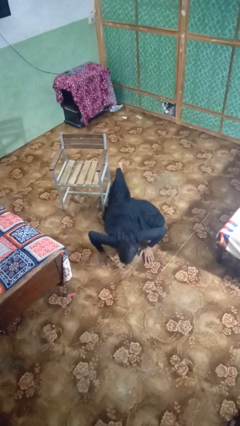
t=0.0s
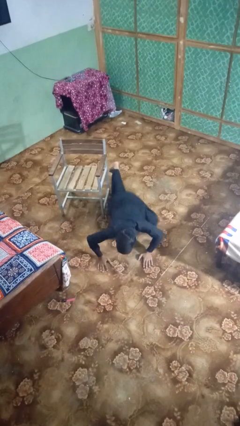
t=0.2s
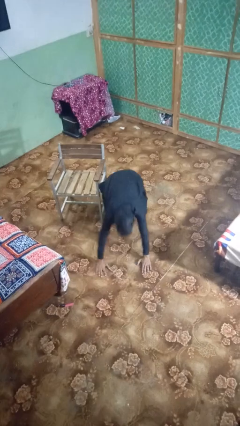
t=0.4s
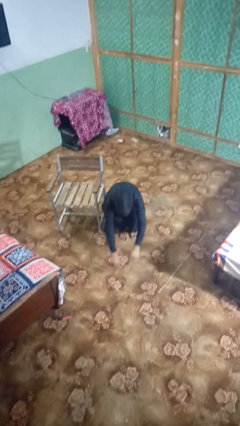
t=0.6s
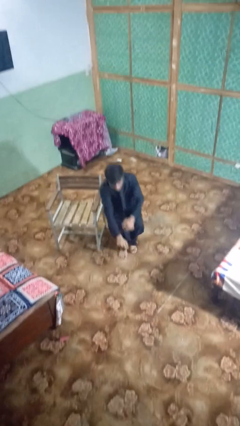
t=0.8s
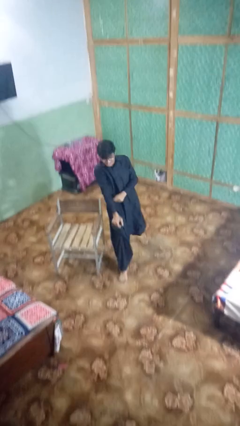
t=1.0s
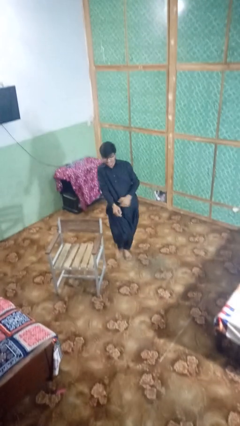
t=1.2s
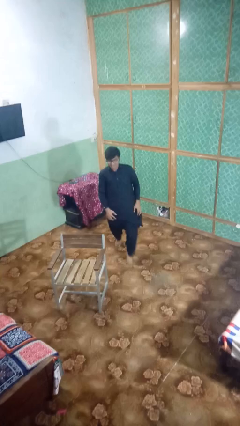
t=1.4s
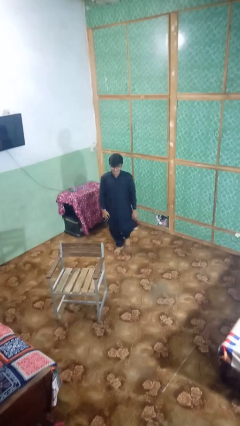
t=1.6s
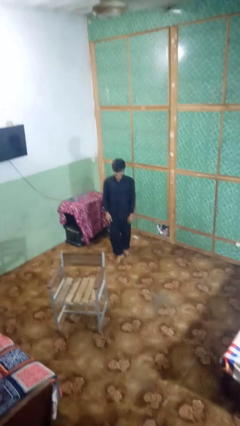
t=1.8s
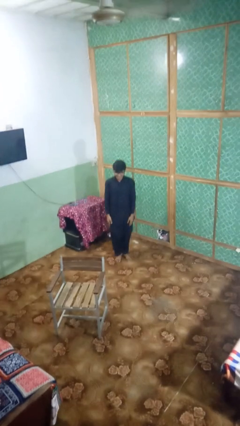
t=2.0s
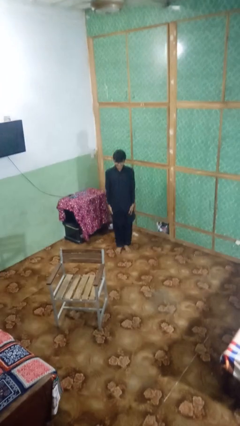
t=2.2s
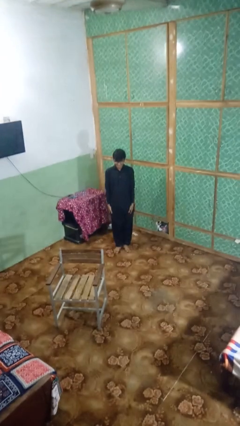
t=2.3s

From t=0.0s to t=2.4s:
person stands up from floor

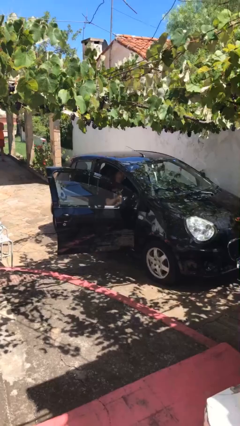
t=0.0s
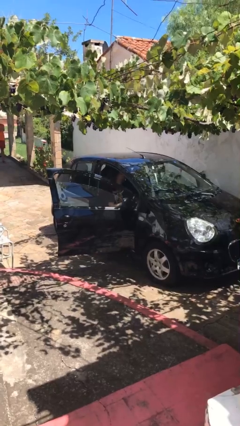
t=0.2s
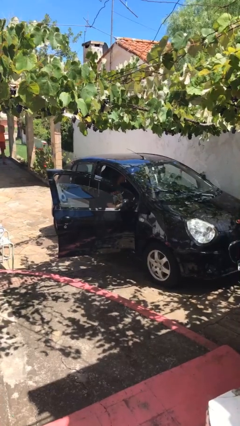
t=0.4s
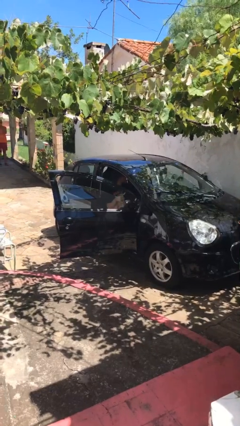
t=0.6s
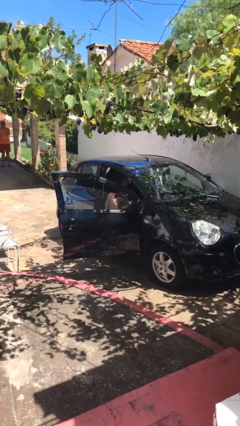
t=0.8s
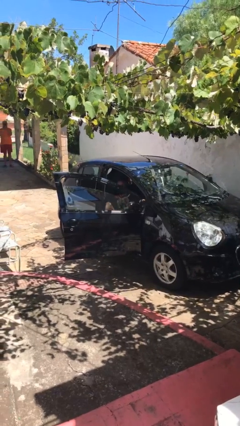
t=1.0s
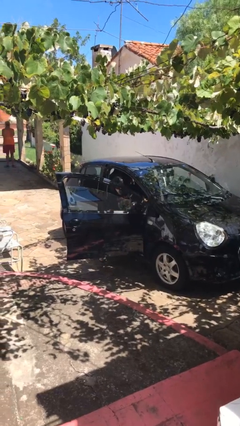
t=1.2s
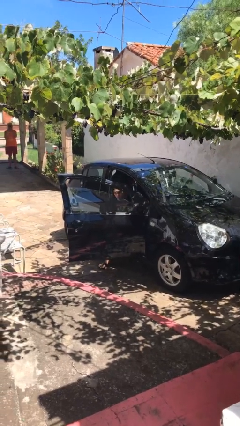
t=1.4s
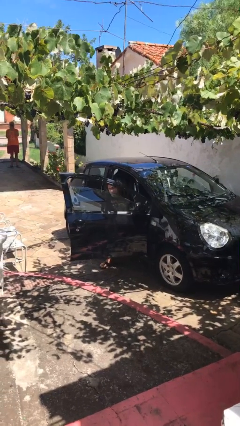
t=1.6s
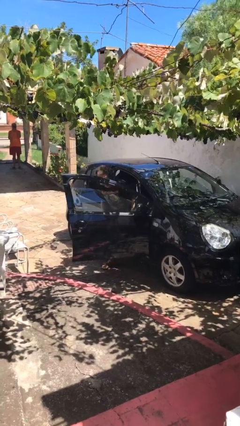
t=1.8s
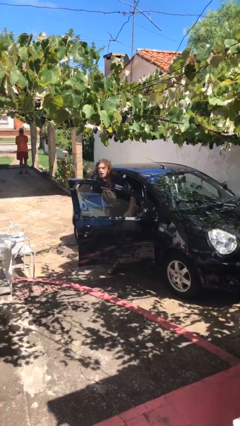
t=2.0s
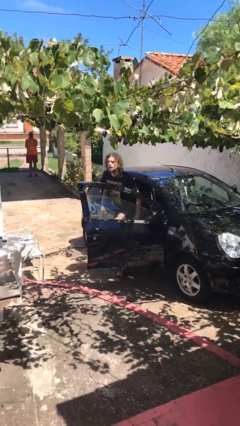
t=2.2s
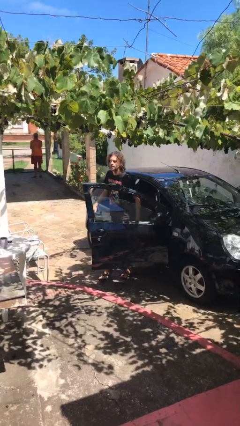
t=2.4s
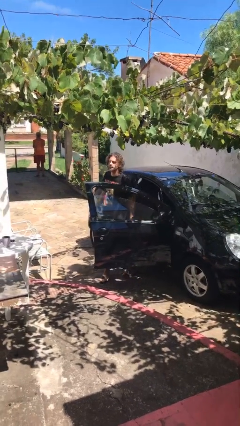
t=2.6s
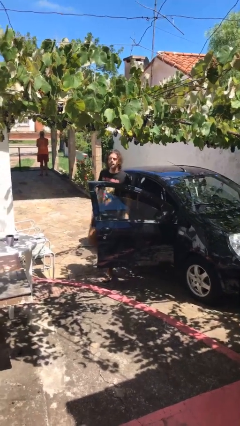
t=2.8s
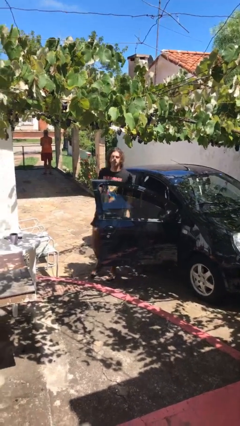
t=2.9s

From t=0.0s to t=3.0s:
person exits car

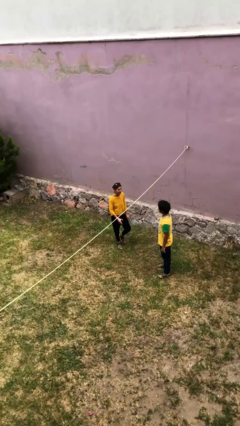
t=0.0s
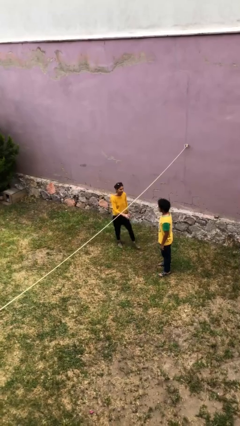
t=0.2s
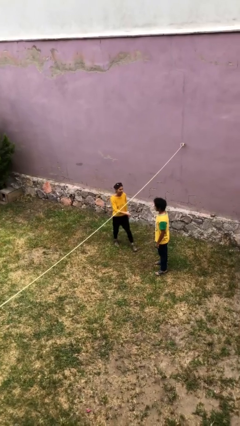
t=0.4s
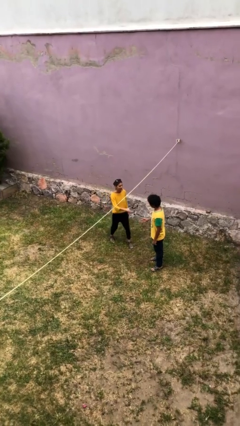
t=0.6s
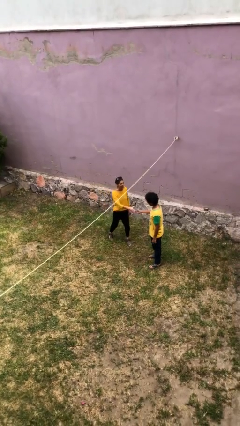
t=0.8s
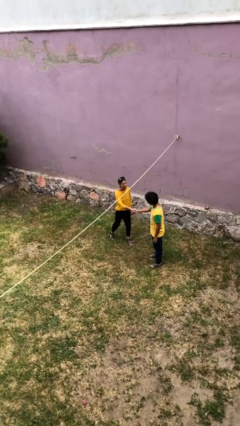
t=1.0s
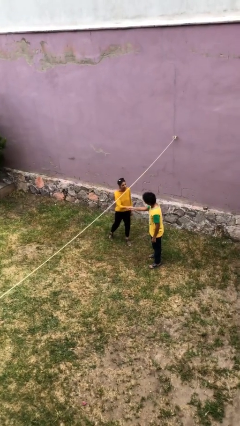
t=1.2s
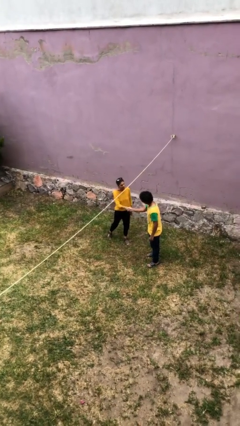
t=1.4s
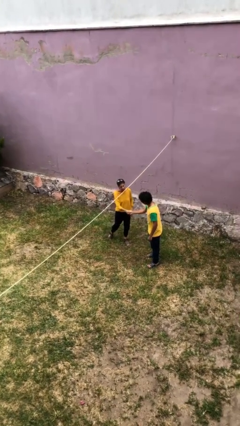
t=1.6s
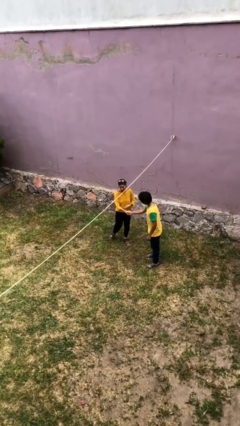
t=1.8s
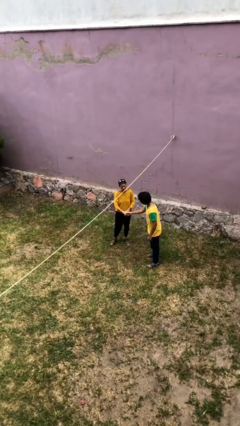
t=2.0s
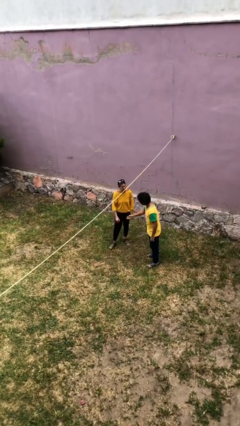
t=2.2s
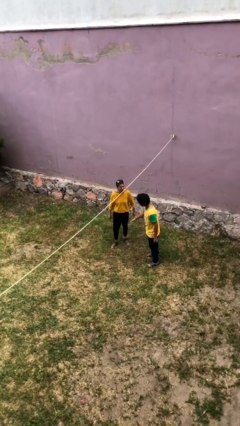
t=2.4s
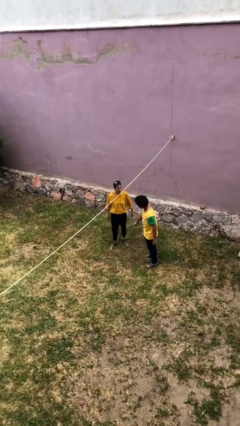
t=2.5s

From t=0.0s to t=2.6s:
person shakes hand

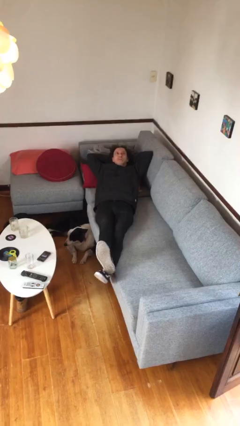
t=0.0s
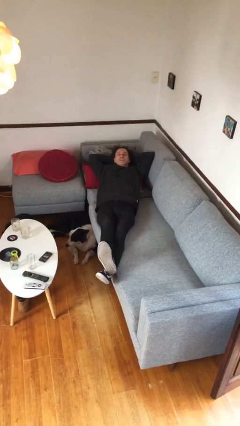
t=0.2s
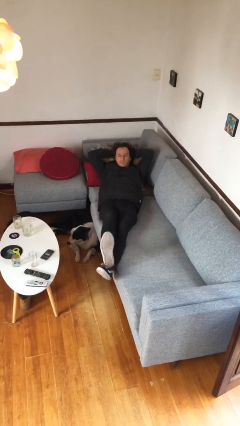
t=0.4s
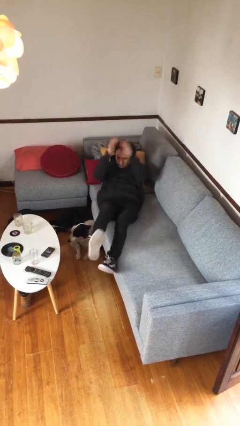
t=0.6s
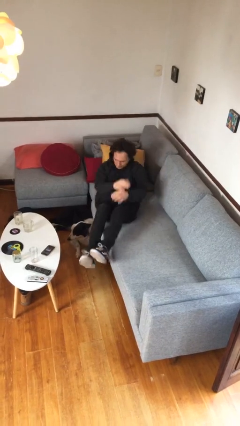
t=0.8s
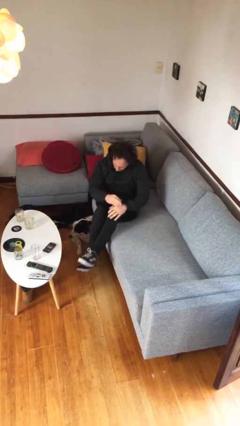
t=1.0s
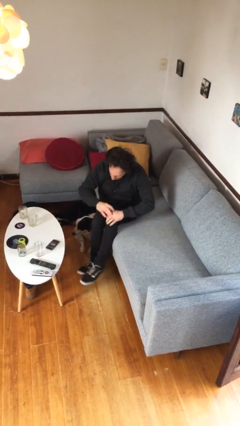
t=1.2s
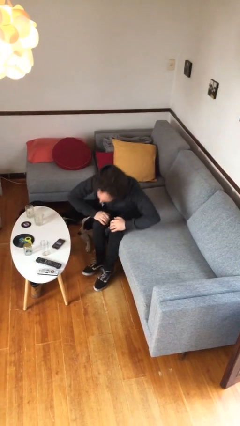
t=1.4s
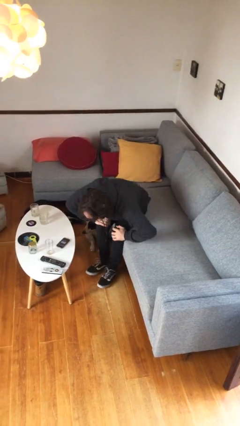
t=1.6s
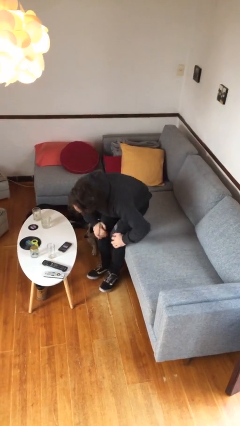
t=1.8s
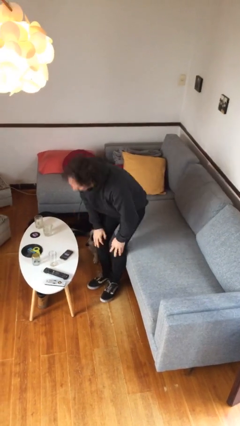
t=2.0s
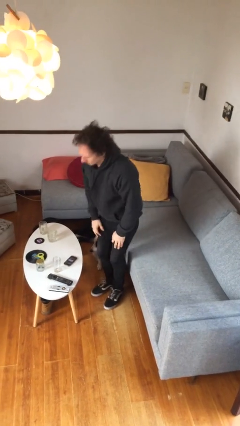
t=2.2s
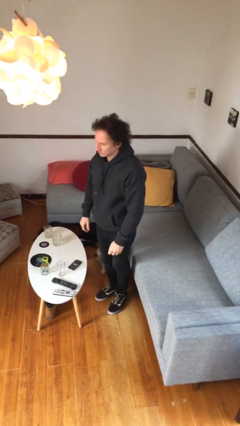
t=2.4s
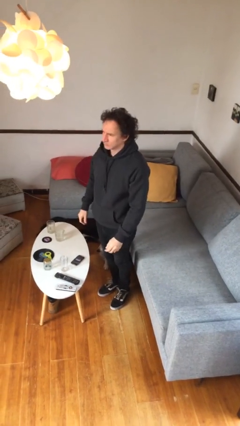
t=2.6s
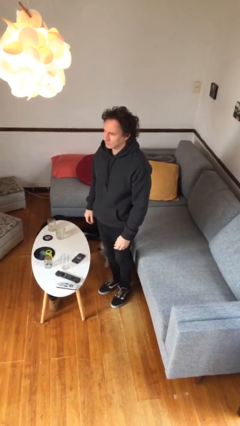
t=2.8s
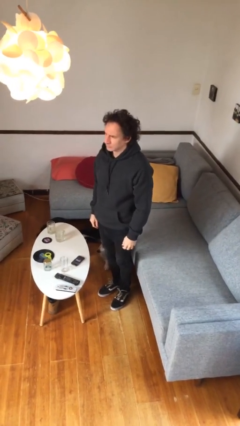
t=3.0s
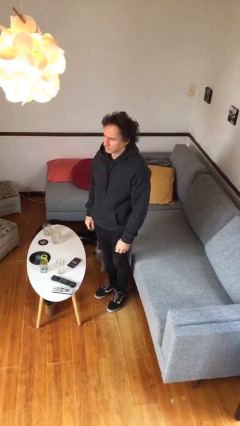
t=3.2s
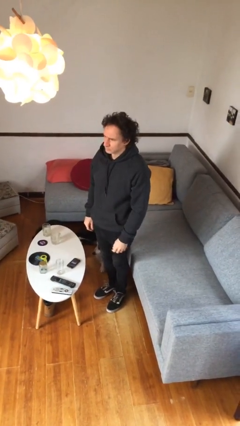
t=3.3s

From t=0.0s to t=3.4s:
person stands up

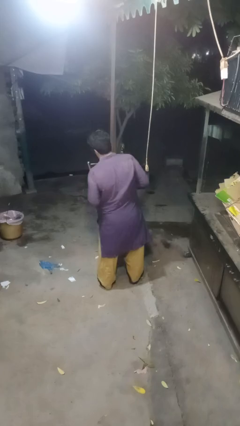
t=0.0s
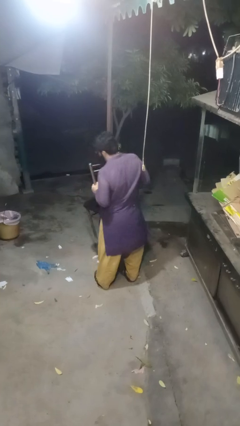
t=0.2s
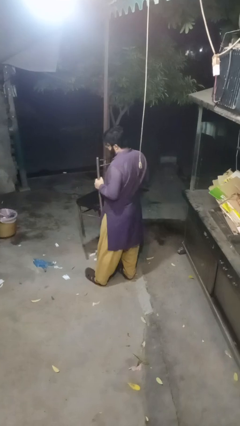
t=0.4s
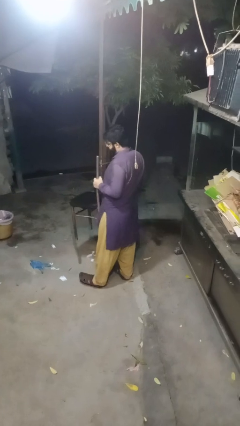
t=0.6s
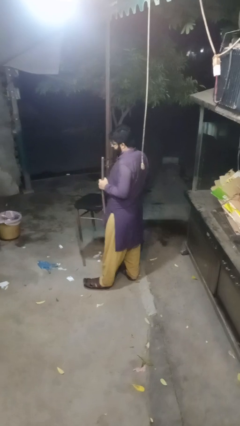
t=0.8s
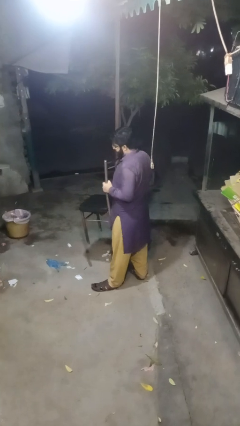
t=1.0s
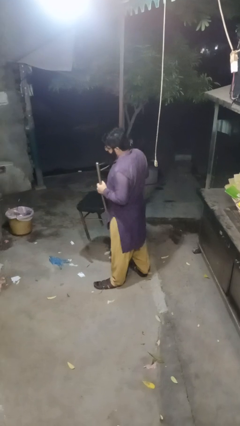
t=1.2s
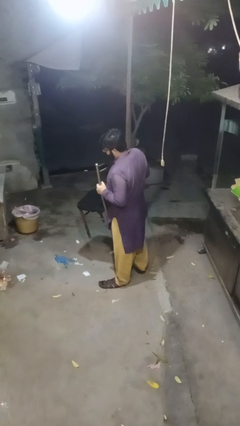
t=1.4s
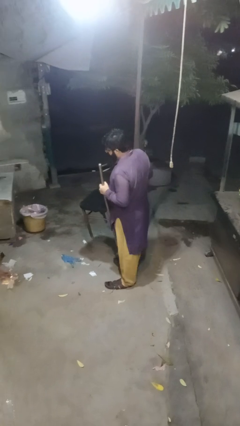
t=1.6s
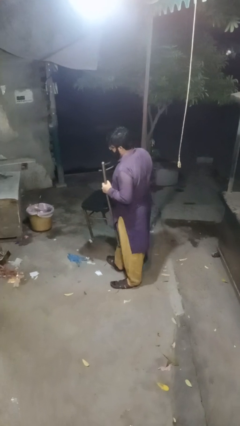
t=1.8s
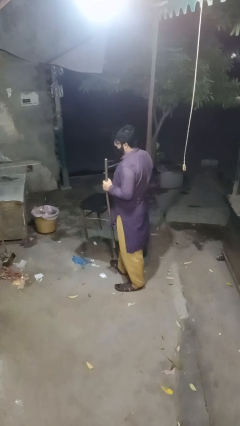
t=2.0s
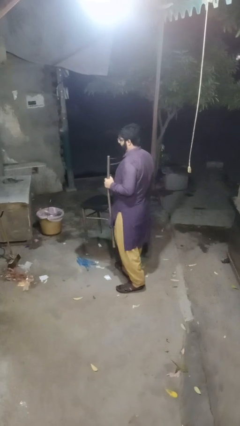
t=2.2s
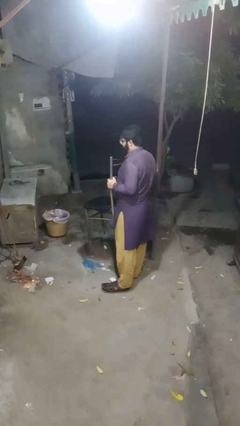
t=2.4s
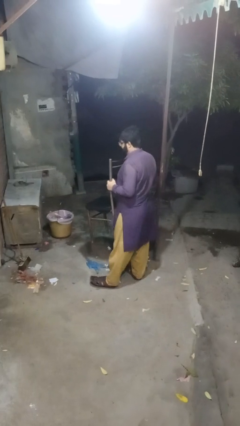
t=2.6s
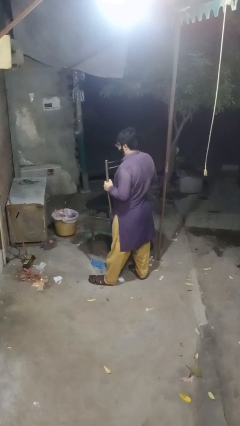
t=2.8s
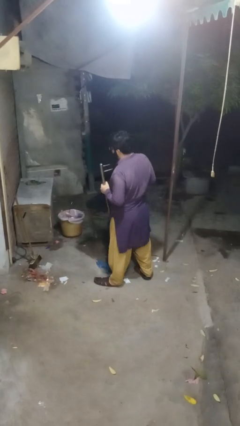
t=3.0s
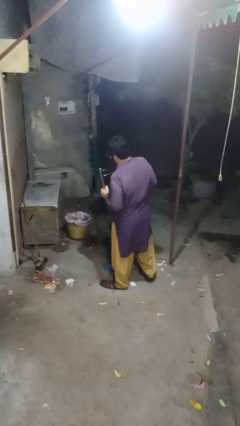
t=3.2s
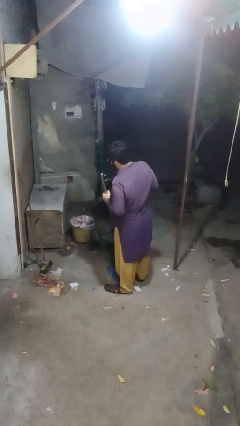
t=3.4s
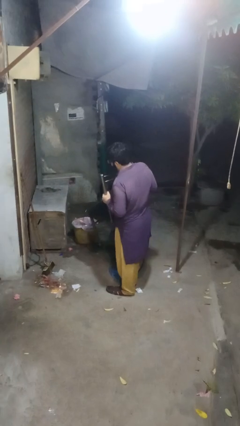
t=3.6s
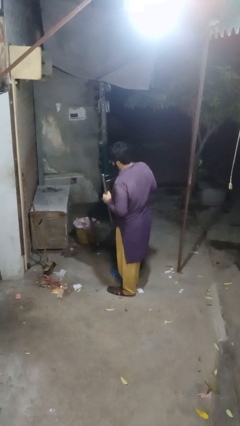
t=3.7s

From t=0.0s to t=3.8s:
person carries furniture

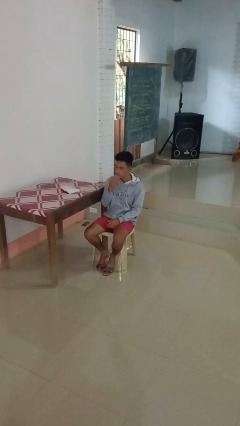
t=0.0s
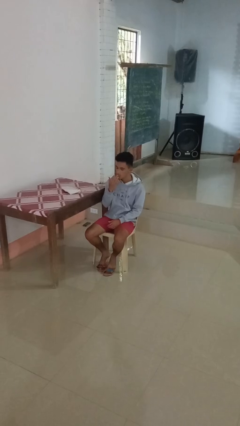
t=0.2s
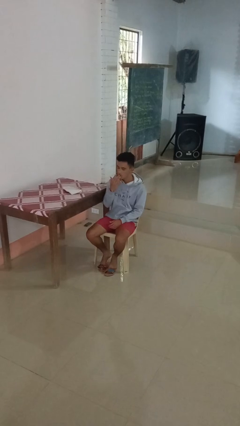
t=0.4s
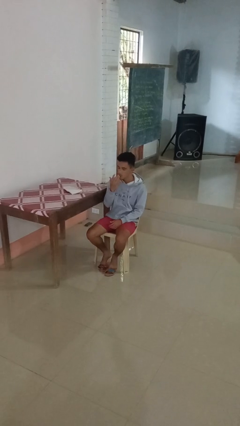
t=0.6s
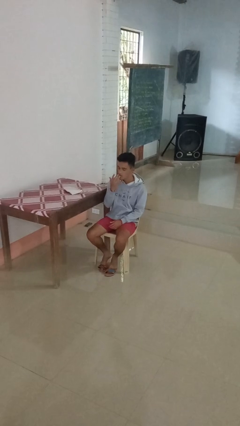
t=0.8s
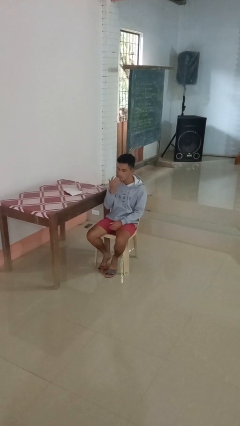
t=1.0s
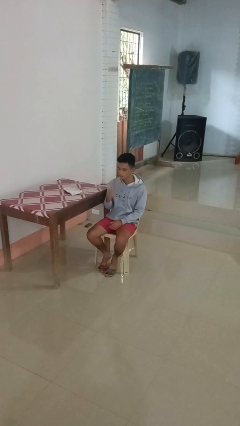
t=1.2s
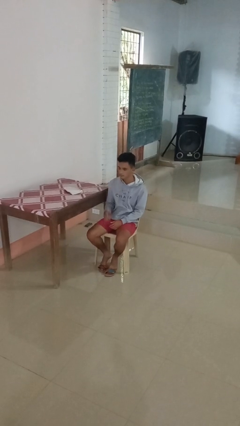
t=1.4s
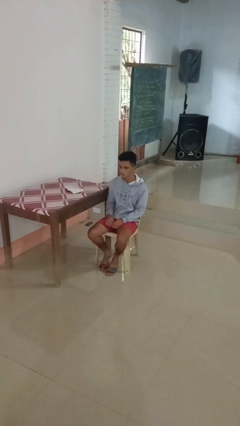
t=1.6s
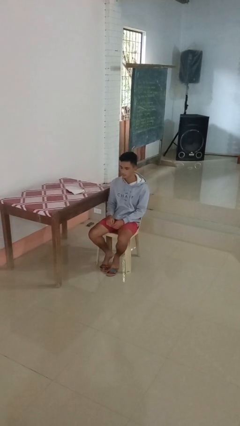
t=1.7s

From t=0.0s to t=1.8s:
person licks fingers
